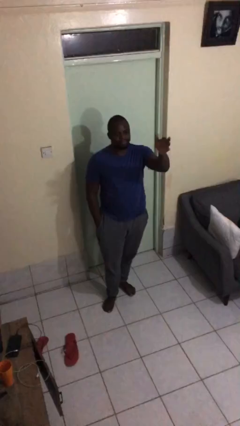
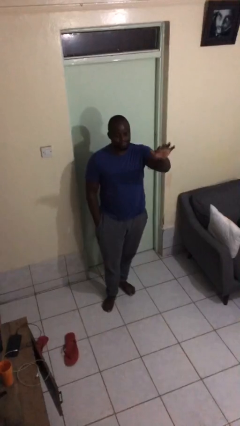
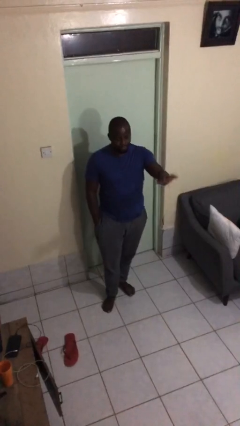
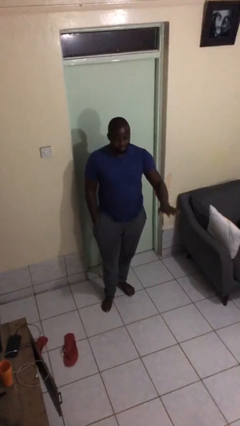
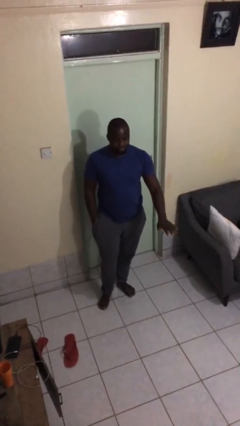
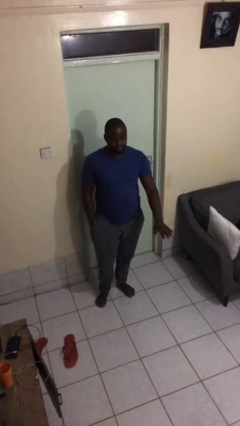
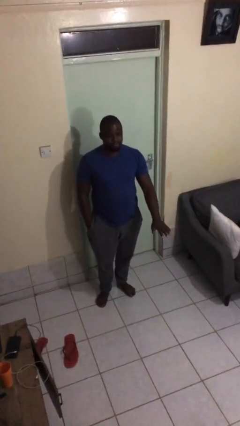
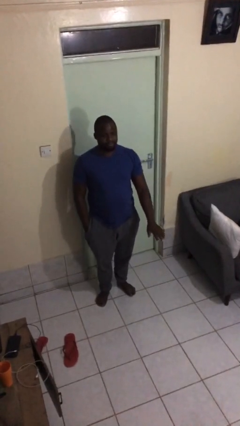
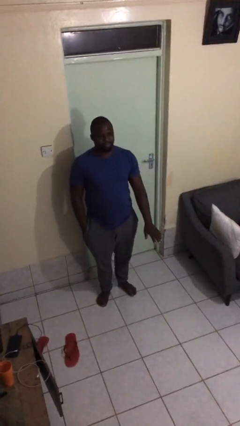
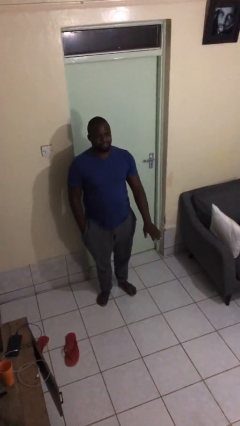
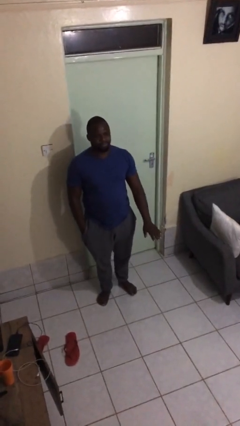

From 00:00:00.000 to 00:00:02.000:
person gestures swipe down

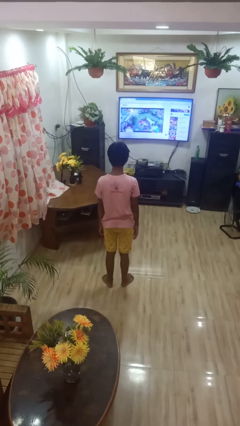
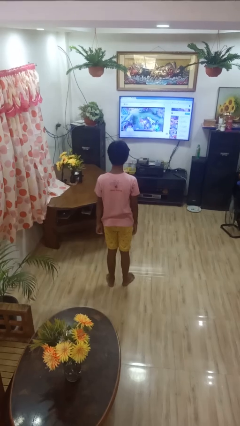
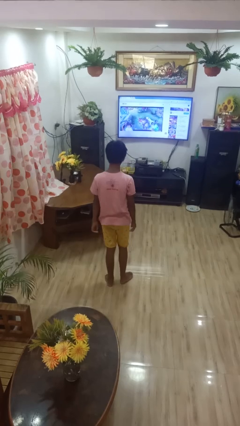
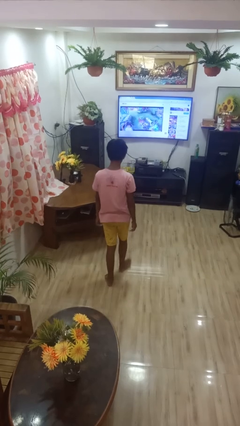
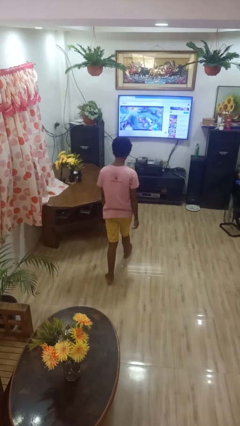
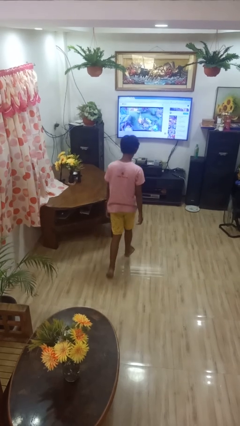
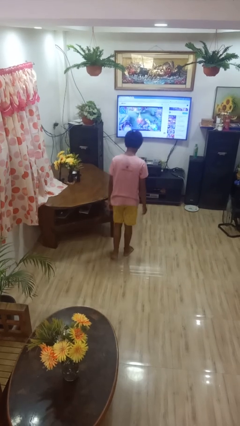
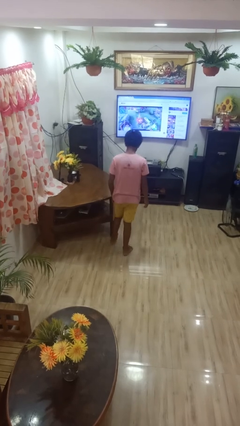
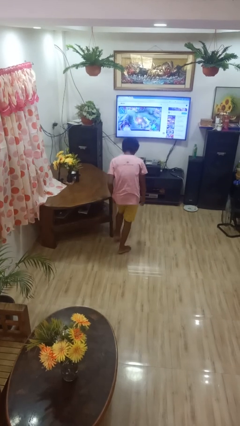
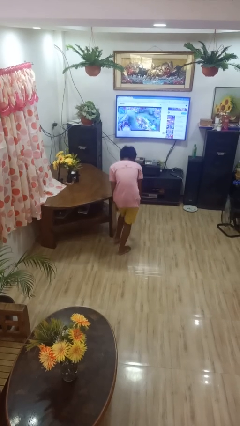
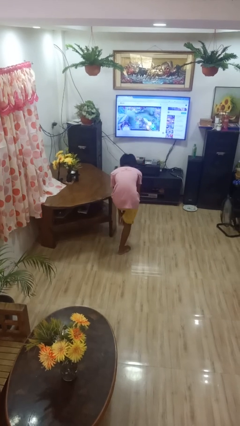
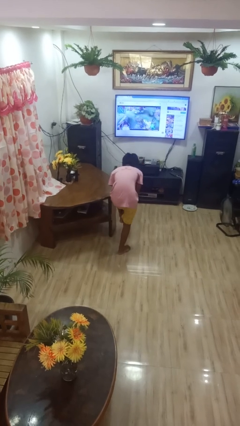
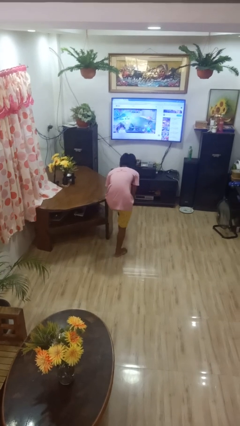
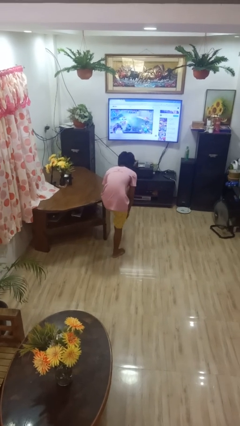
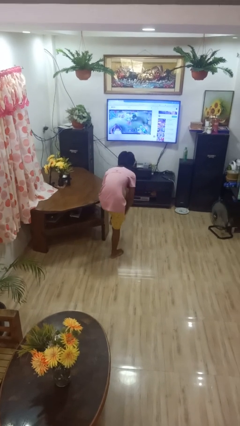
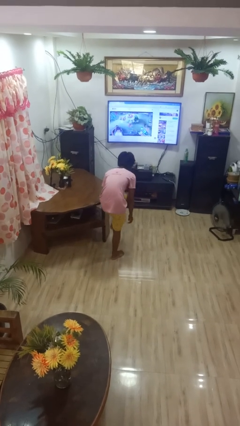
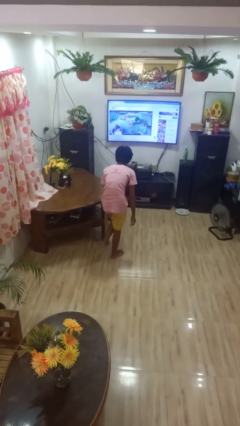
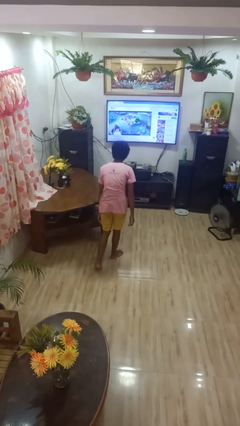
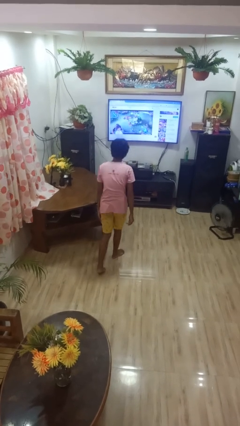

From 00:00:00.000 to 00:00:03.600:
person stubs toe

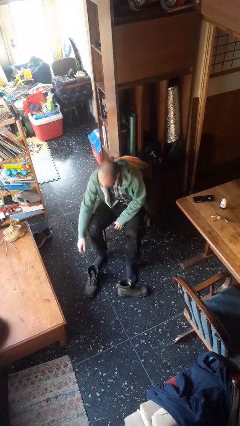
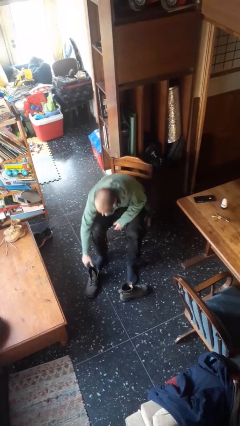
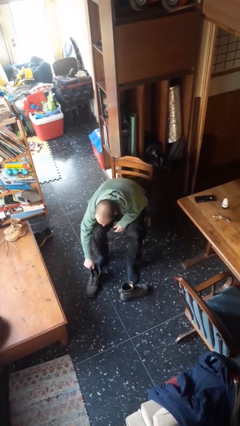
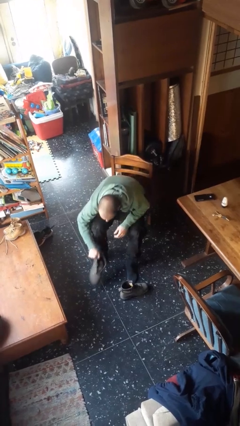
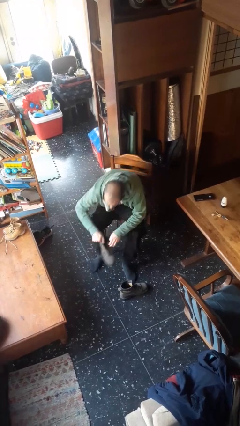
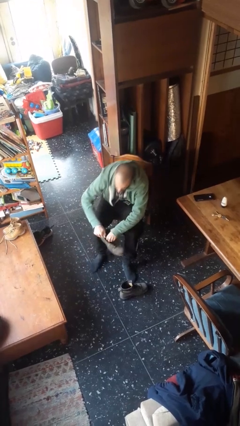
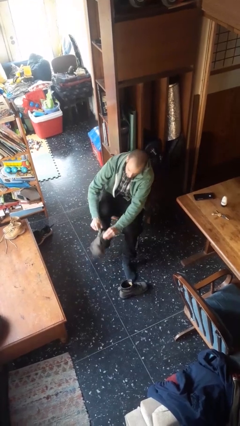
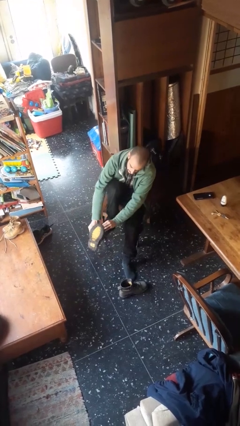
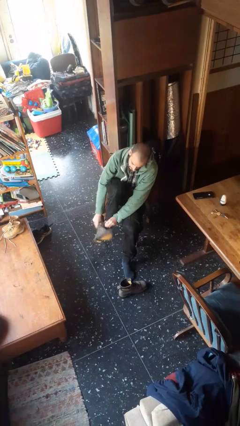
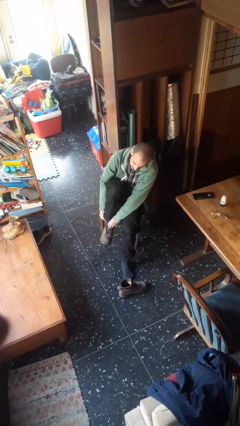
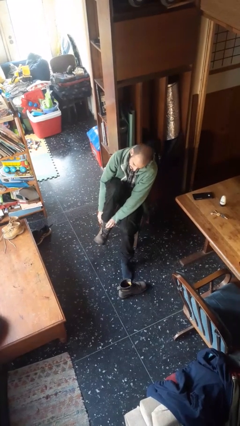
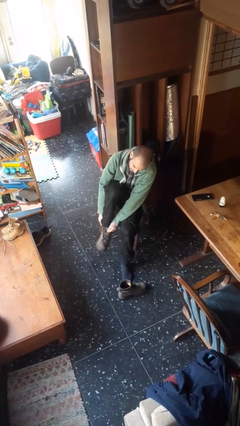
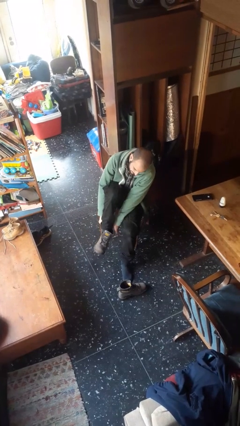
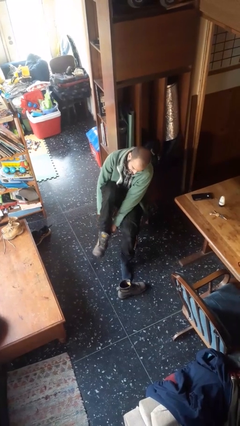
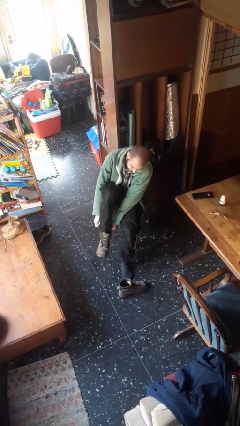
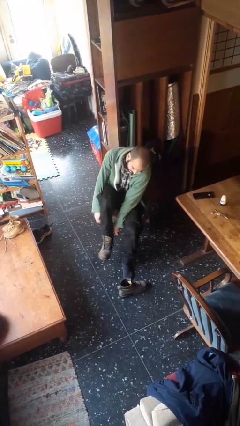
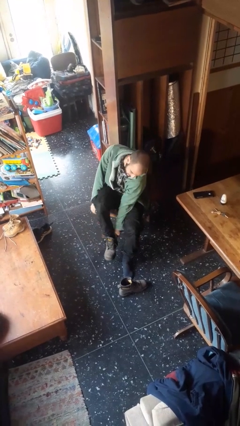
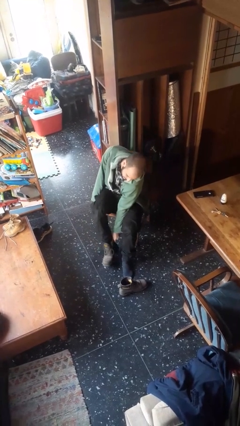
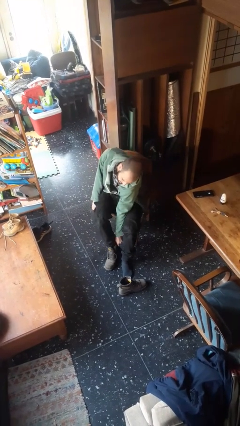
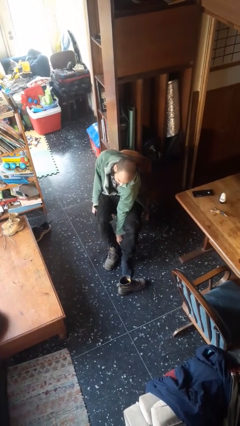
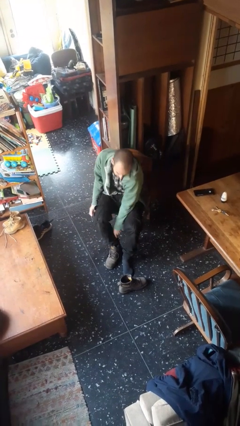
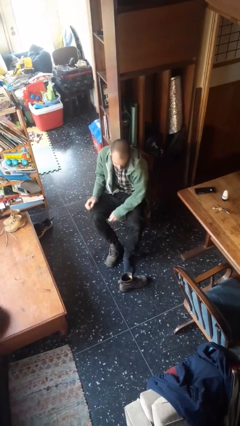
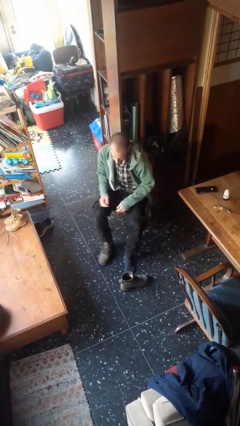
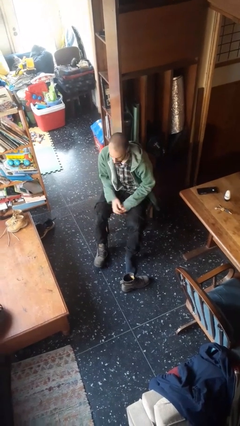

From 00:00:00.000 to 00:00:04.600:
person puts on boots

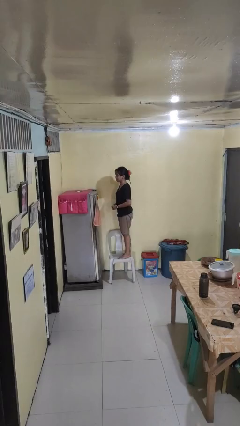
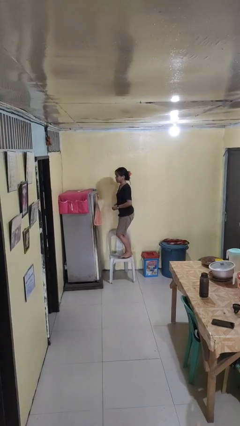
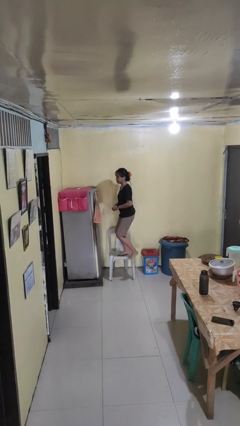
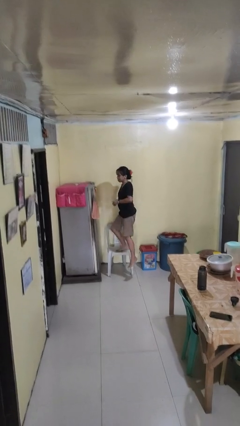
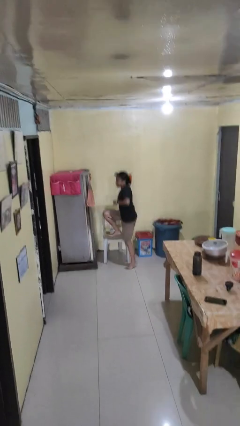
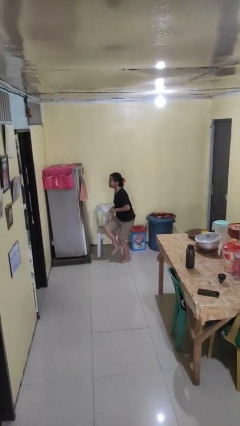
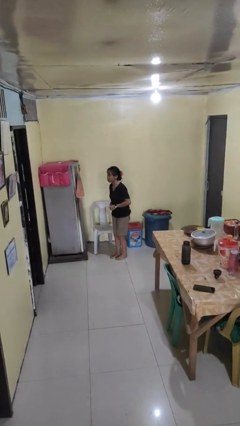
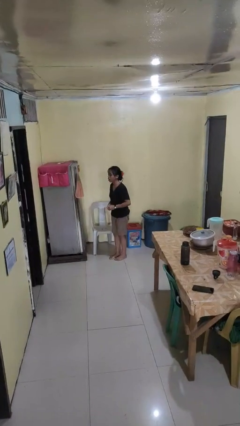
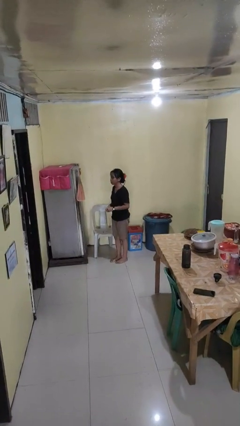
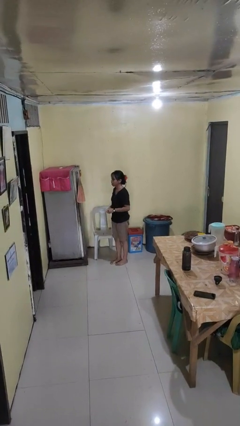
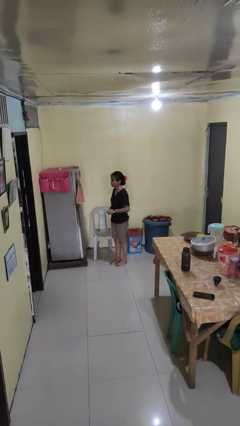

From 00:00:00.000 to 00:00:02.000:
person climbs off chair

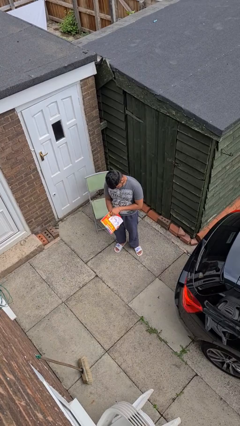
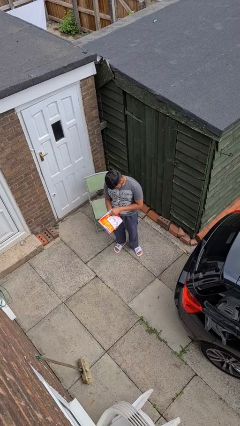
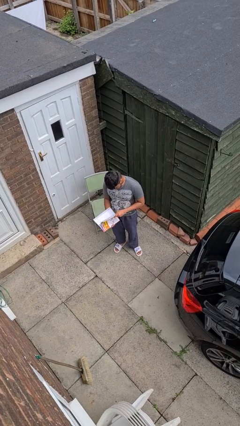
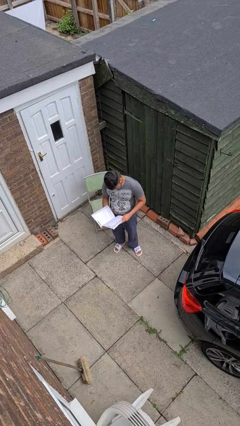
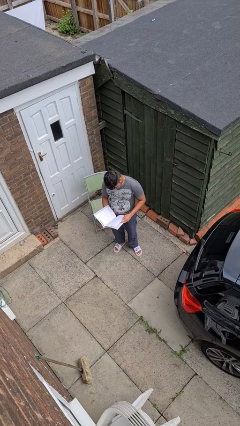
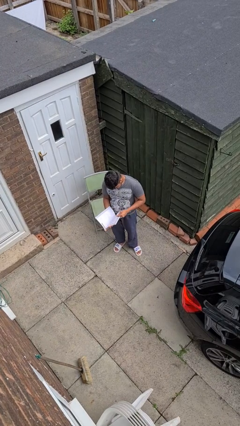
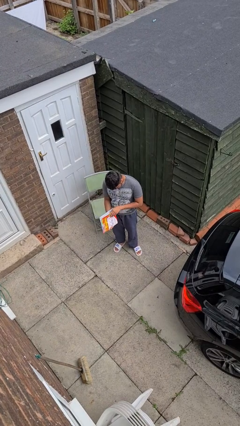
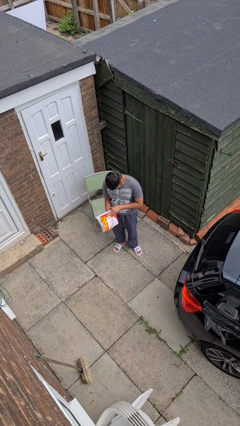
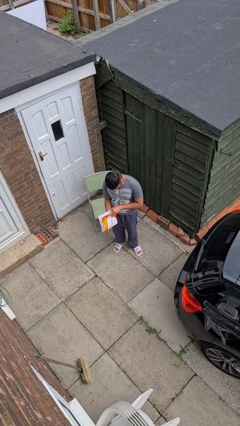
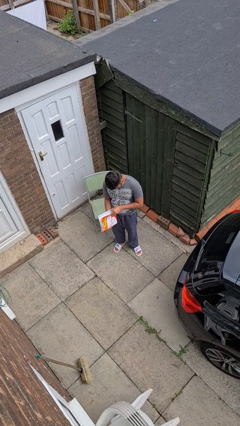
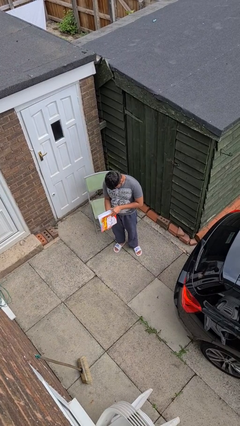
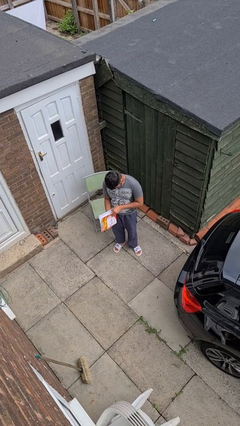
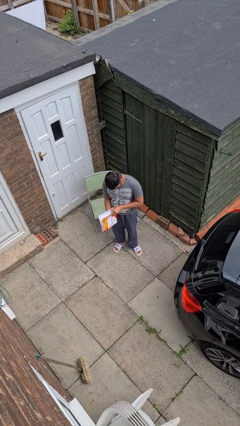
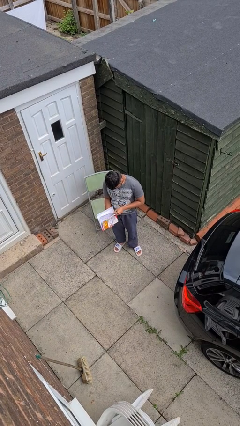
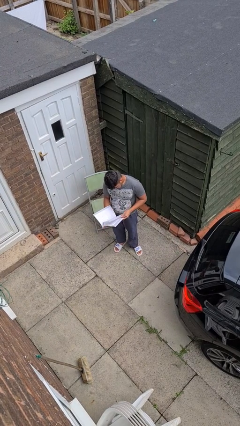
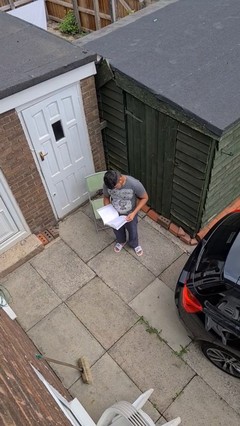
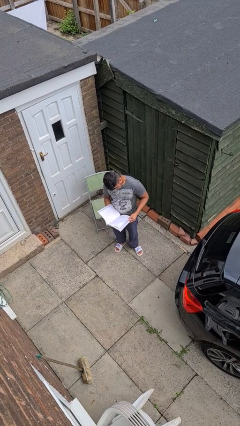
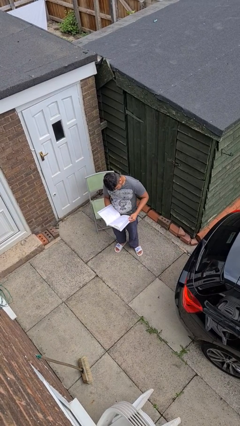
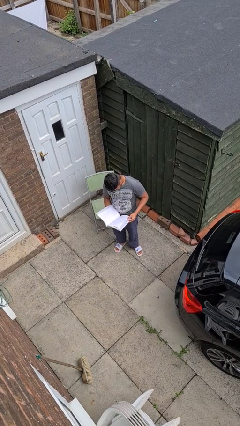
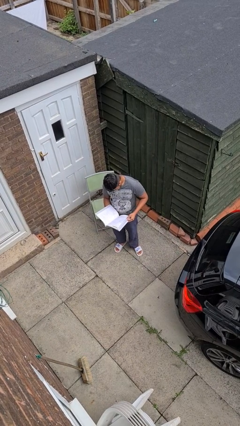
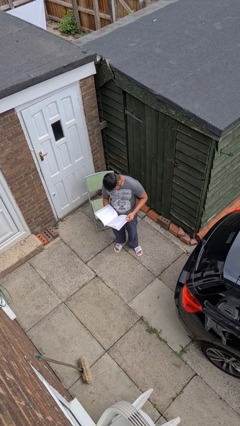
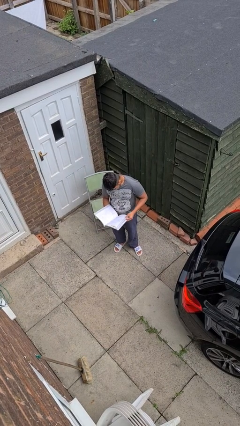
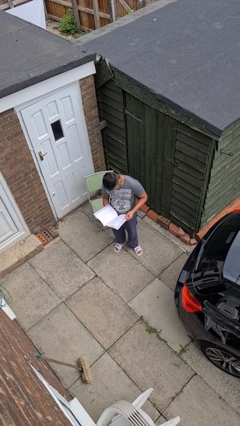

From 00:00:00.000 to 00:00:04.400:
person reads book

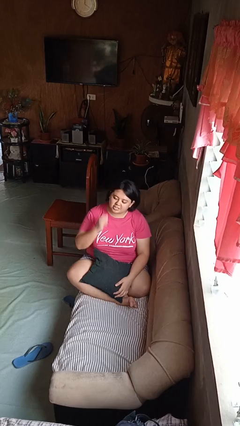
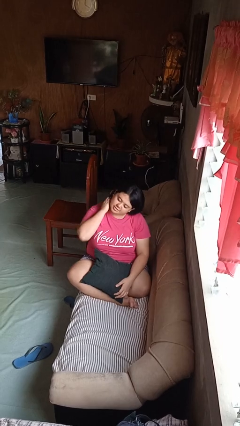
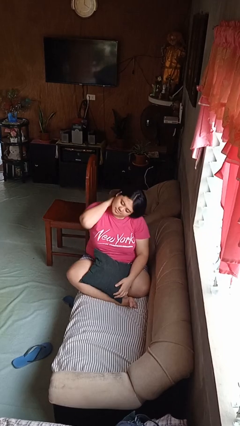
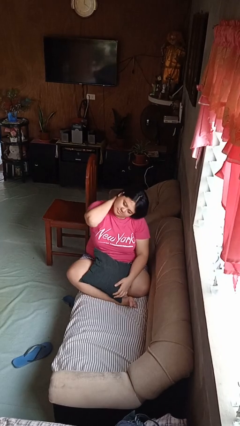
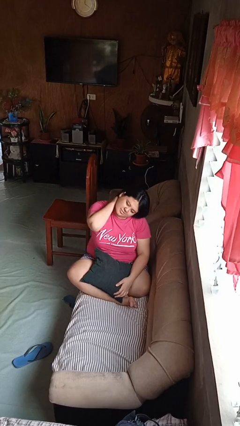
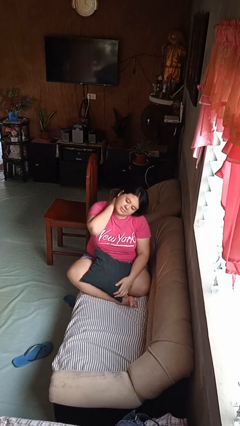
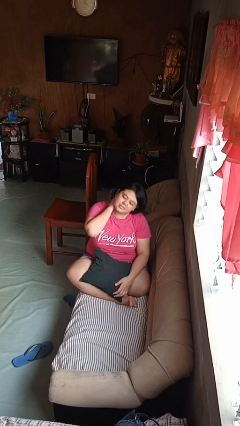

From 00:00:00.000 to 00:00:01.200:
person rubs neck
